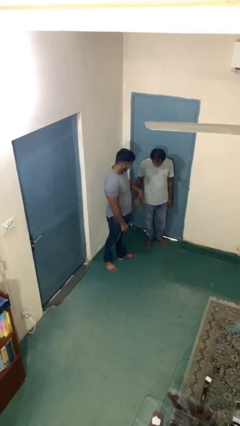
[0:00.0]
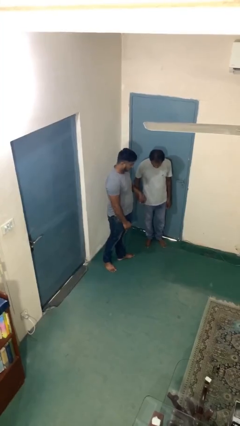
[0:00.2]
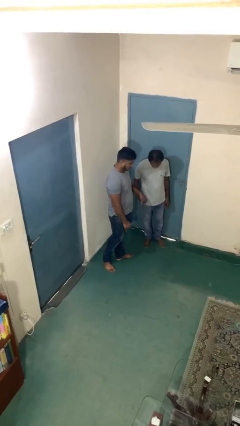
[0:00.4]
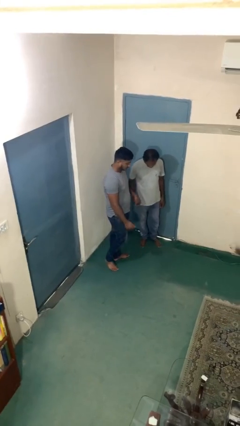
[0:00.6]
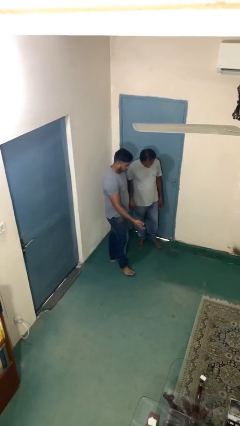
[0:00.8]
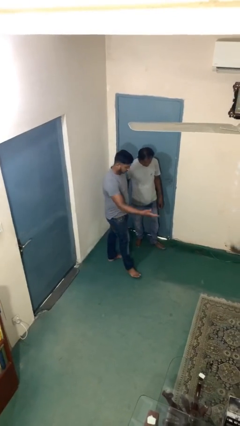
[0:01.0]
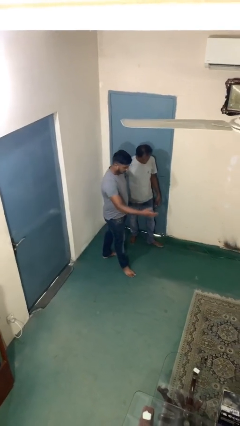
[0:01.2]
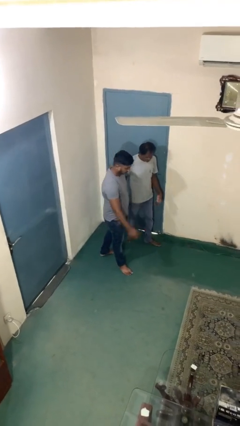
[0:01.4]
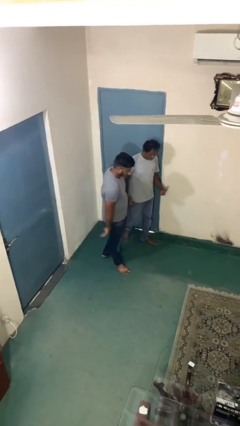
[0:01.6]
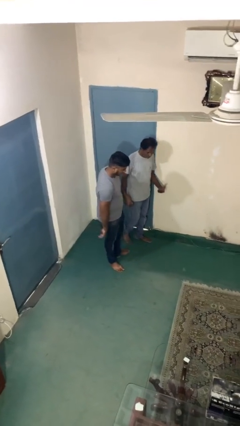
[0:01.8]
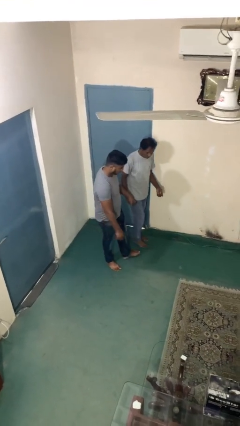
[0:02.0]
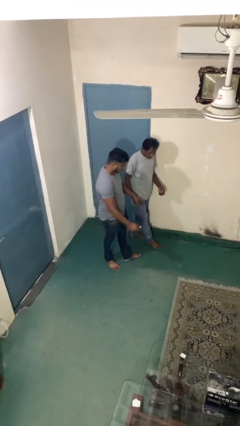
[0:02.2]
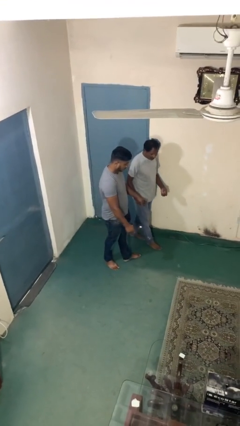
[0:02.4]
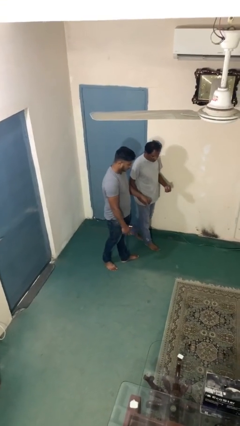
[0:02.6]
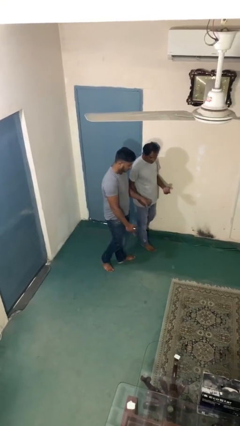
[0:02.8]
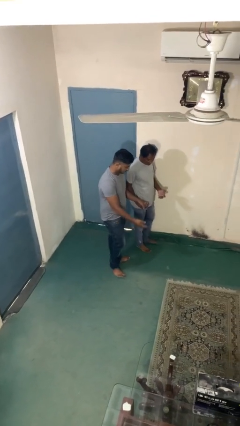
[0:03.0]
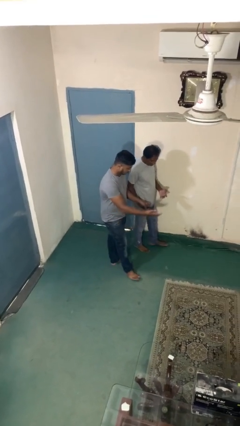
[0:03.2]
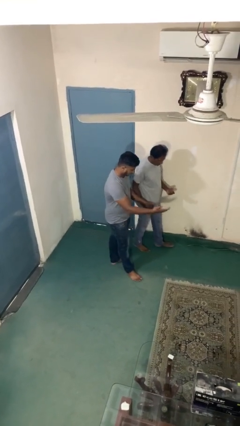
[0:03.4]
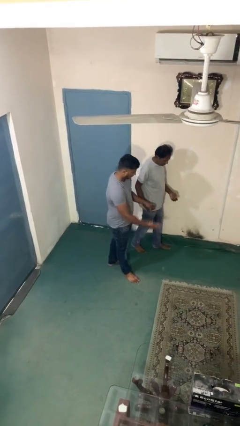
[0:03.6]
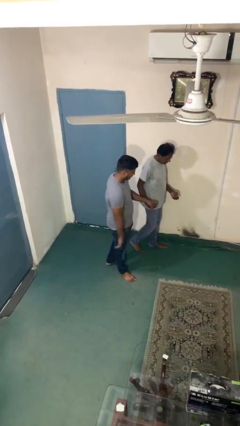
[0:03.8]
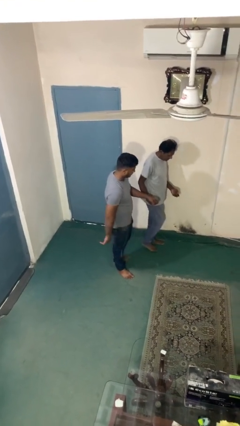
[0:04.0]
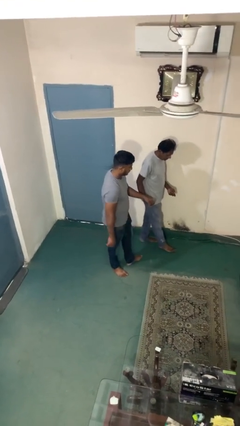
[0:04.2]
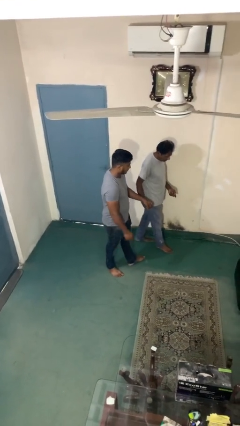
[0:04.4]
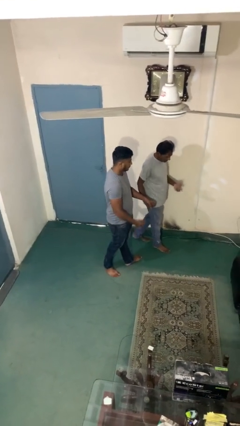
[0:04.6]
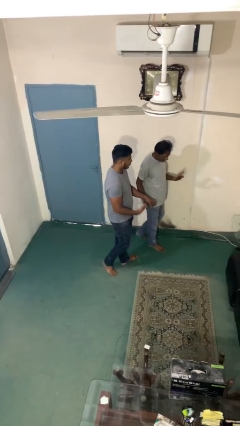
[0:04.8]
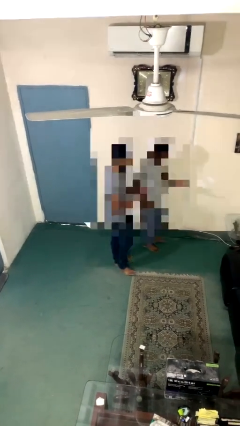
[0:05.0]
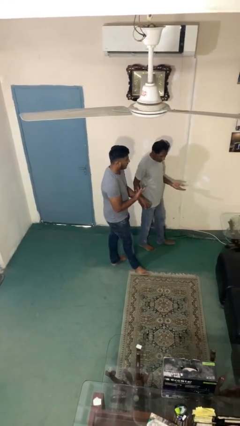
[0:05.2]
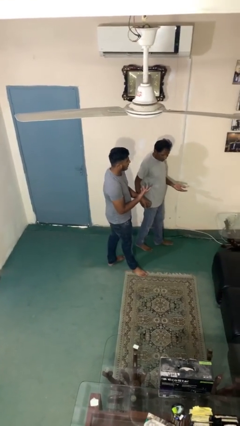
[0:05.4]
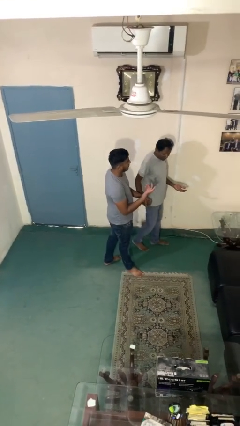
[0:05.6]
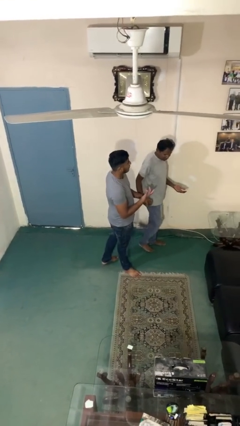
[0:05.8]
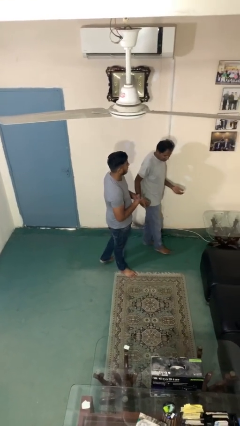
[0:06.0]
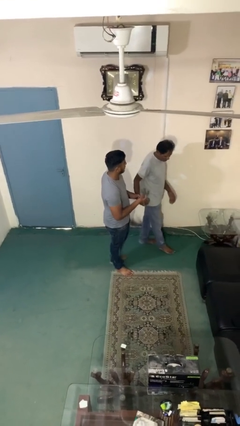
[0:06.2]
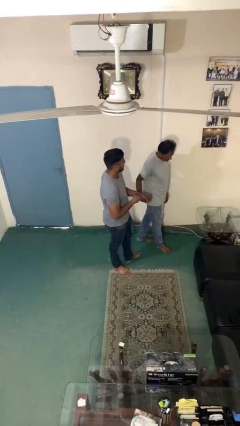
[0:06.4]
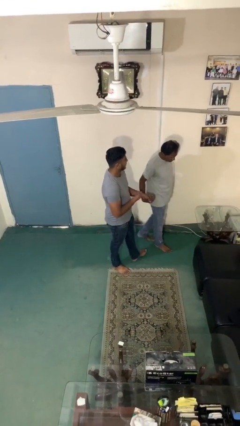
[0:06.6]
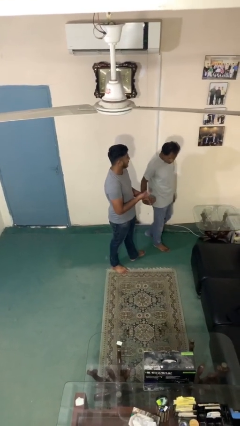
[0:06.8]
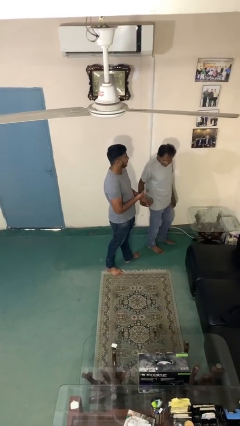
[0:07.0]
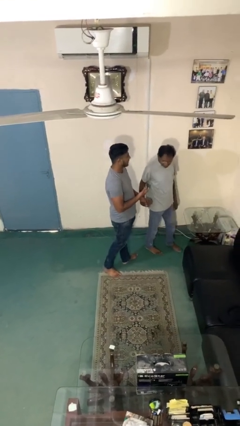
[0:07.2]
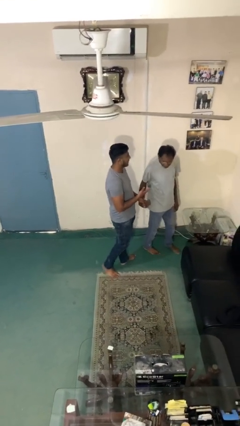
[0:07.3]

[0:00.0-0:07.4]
person holds hand

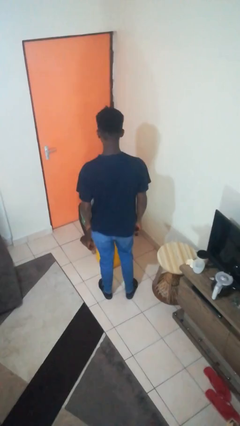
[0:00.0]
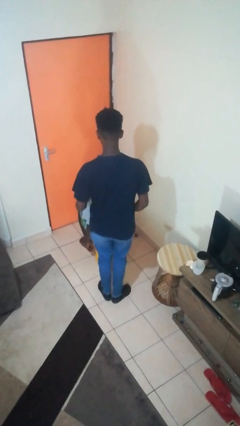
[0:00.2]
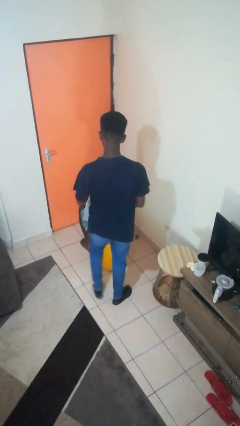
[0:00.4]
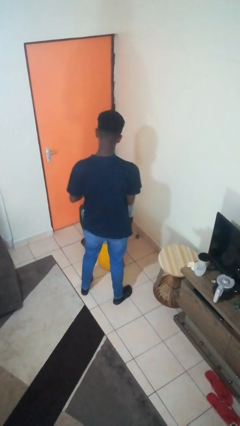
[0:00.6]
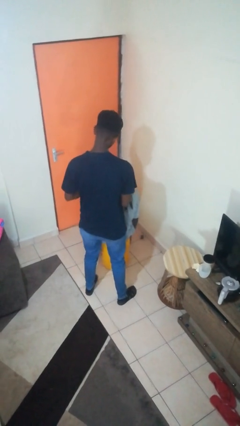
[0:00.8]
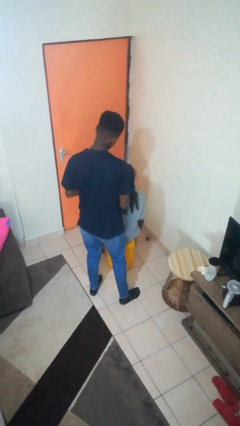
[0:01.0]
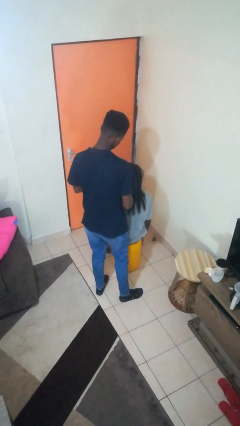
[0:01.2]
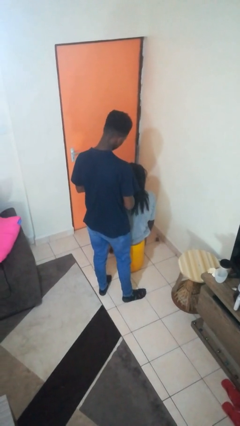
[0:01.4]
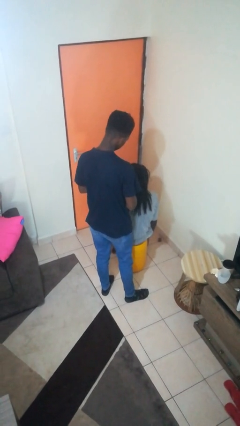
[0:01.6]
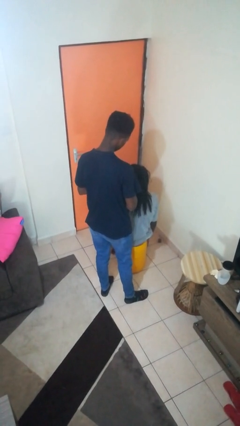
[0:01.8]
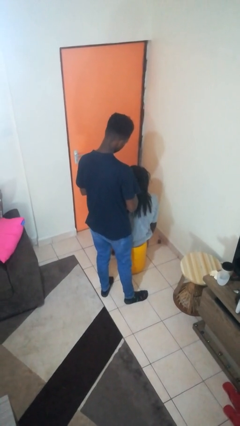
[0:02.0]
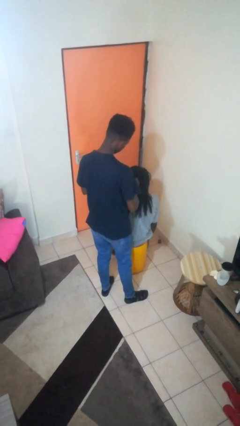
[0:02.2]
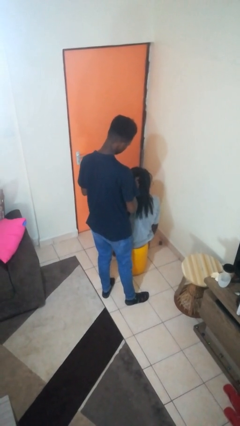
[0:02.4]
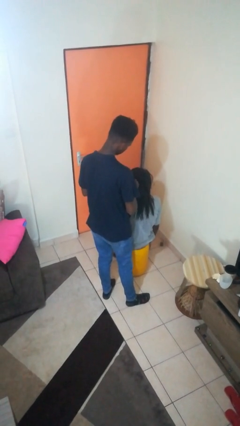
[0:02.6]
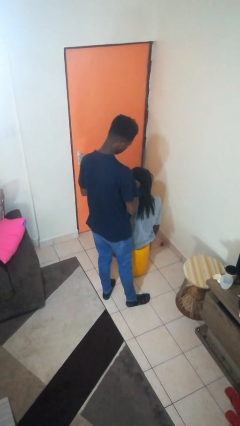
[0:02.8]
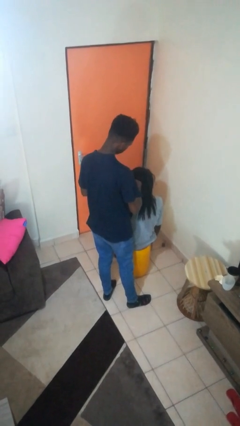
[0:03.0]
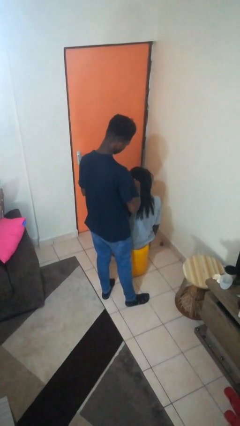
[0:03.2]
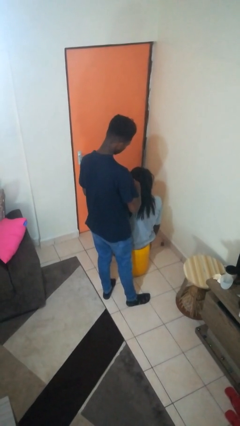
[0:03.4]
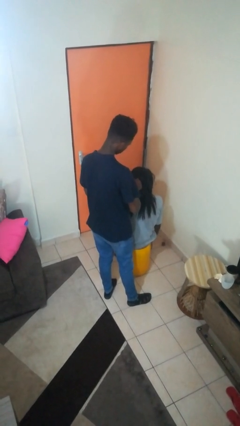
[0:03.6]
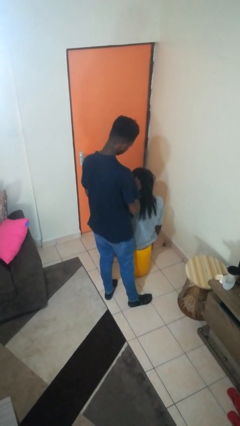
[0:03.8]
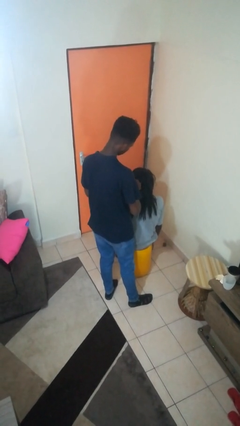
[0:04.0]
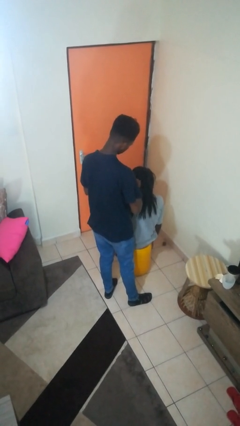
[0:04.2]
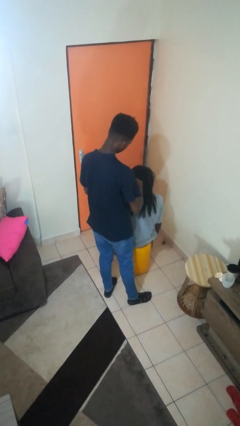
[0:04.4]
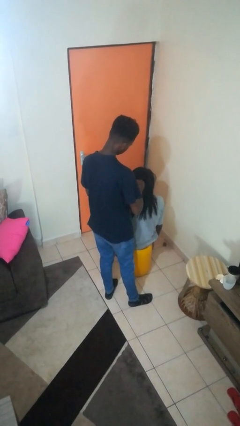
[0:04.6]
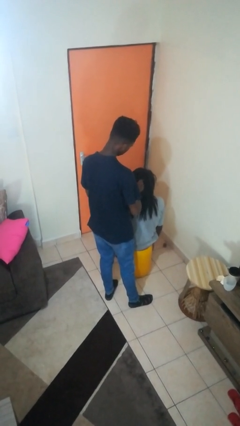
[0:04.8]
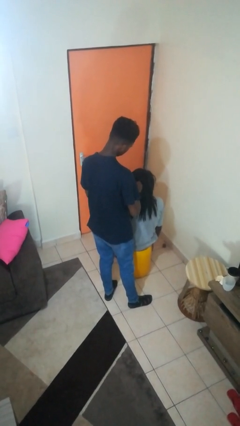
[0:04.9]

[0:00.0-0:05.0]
person braids hair of person

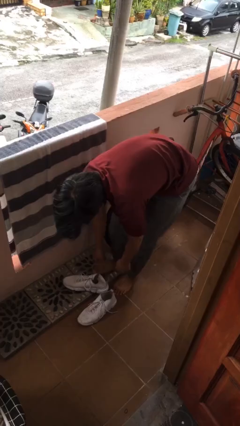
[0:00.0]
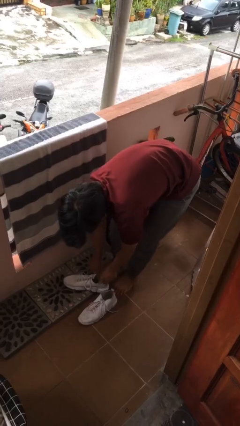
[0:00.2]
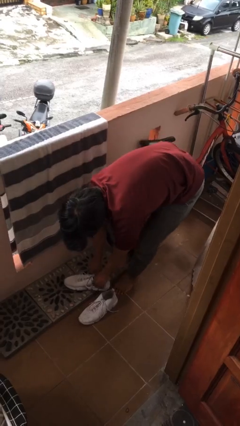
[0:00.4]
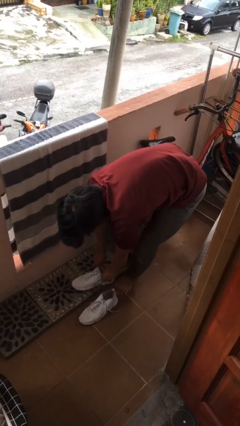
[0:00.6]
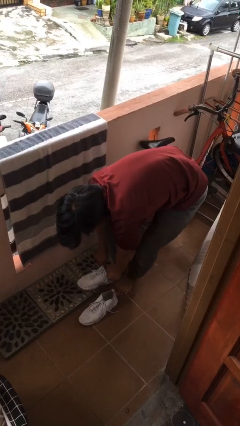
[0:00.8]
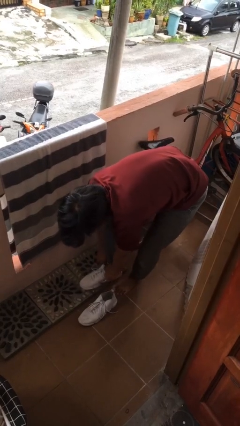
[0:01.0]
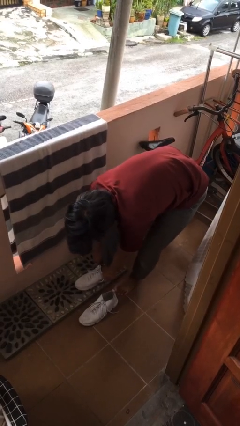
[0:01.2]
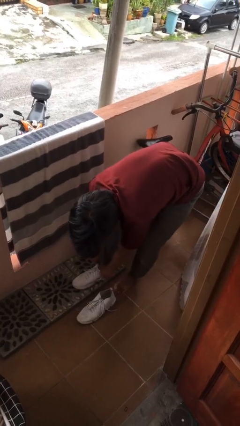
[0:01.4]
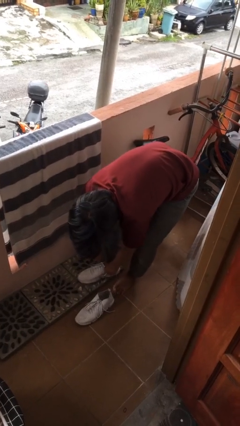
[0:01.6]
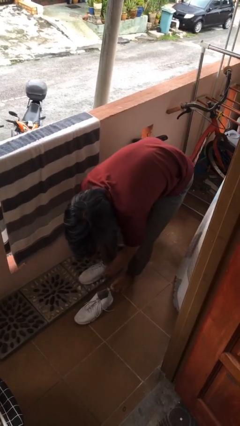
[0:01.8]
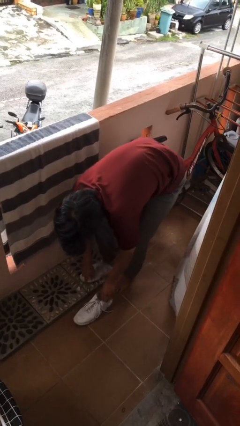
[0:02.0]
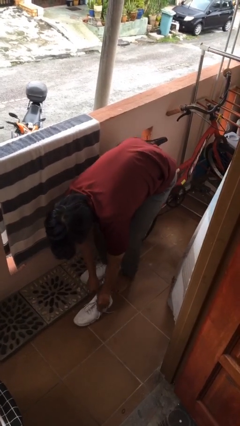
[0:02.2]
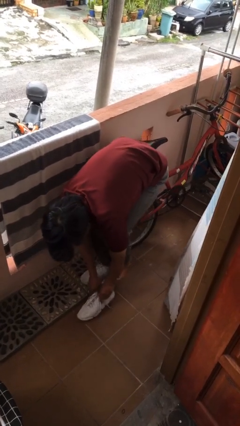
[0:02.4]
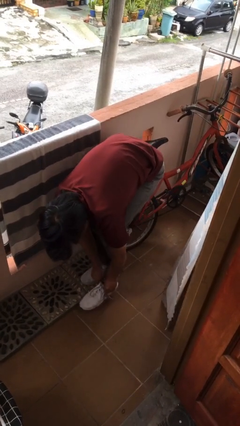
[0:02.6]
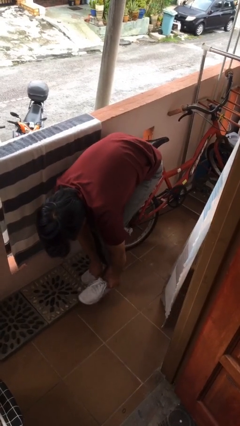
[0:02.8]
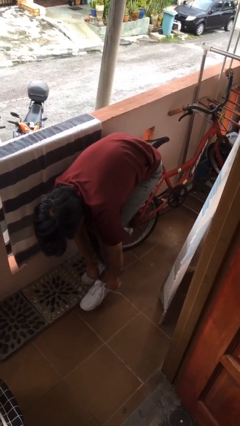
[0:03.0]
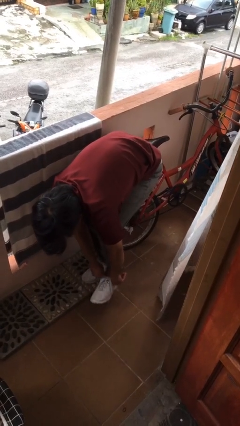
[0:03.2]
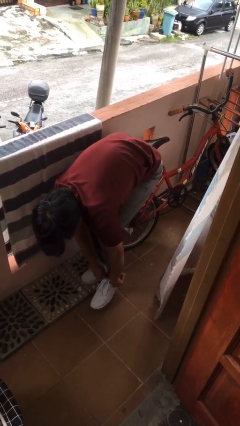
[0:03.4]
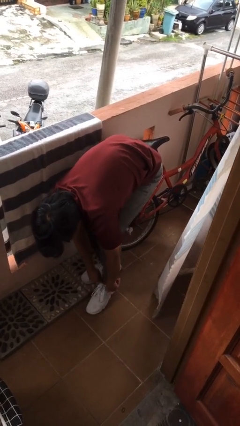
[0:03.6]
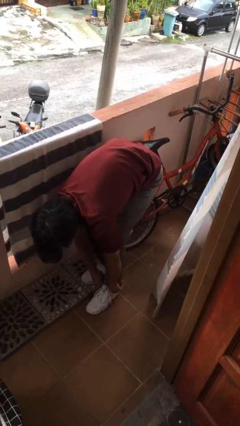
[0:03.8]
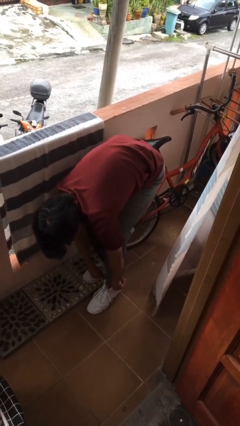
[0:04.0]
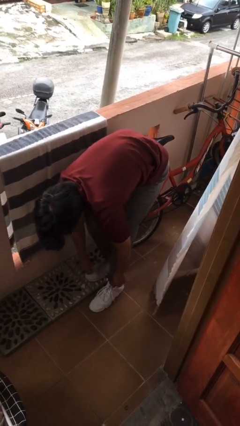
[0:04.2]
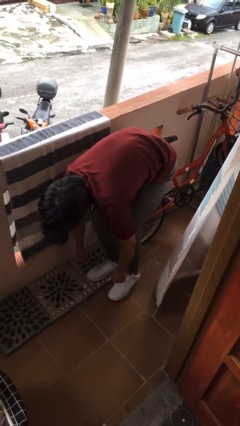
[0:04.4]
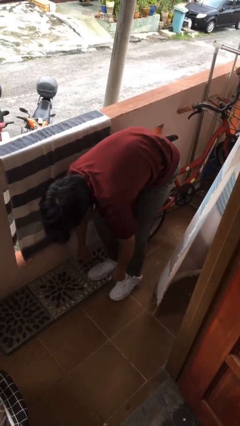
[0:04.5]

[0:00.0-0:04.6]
person puts on shoes

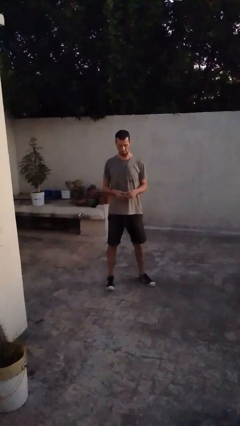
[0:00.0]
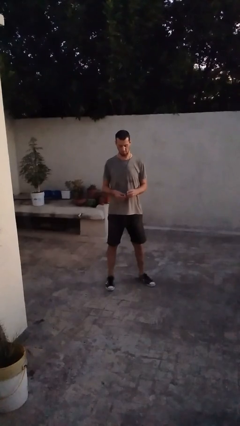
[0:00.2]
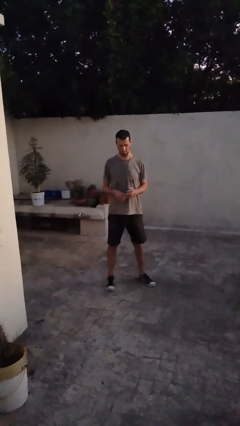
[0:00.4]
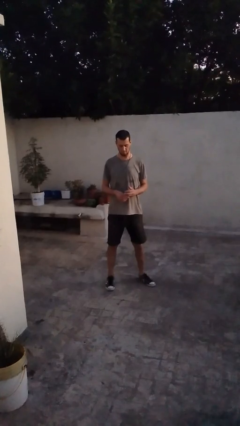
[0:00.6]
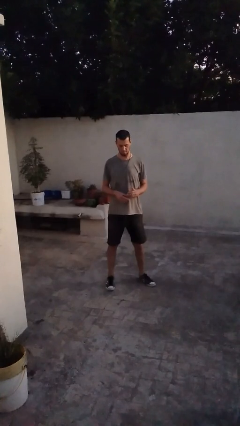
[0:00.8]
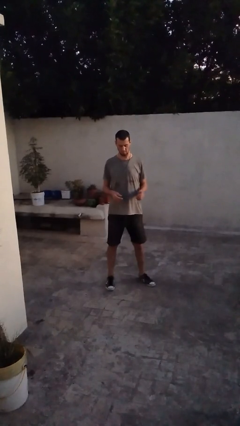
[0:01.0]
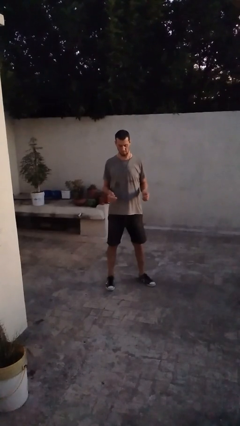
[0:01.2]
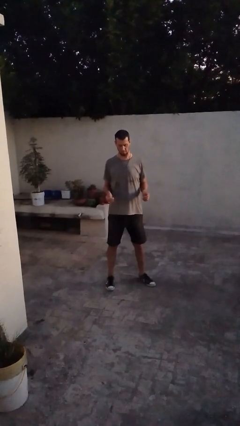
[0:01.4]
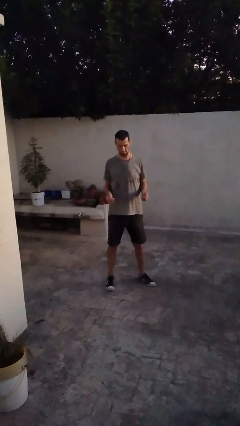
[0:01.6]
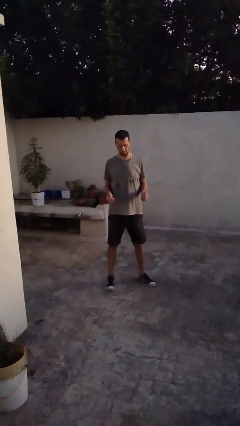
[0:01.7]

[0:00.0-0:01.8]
person puts on ring
